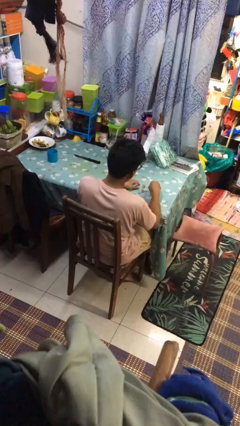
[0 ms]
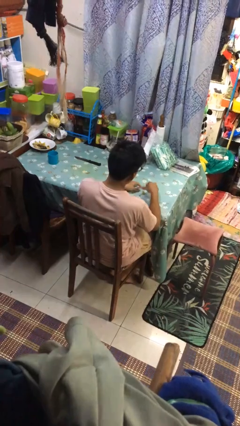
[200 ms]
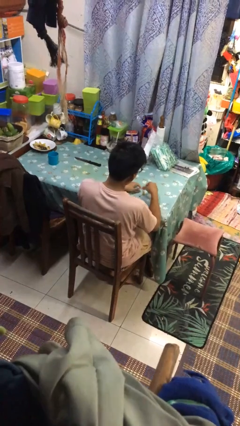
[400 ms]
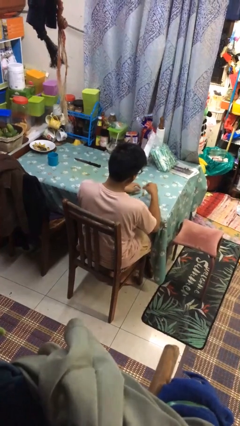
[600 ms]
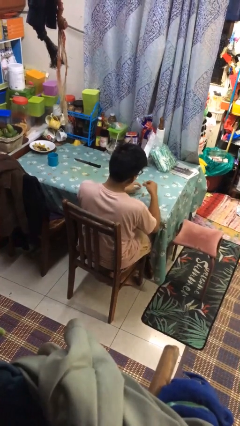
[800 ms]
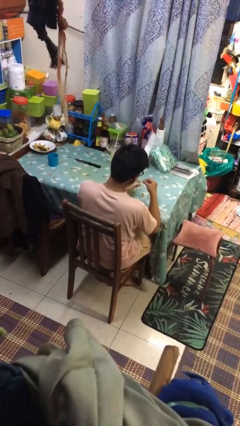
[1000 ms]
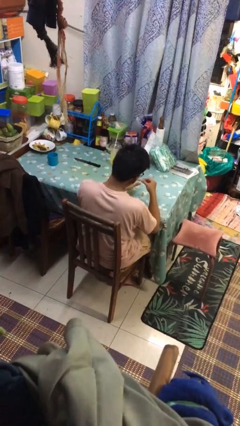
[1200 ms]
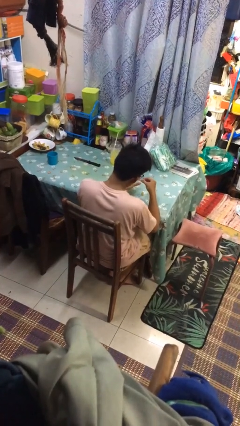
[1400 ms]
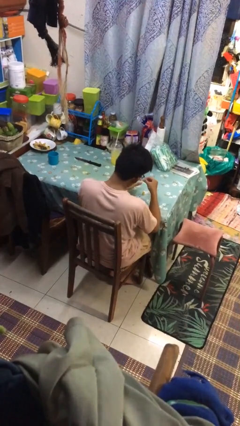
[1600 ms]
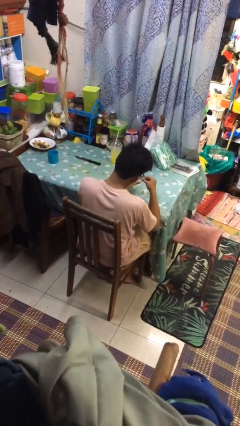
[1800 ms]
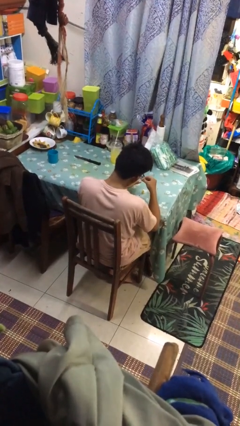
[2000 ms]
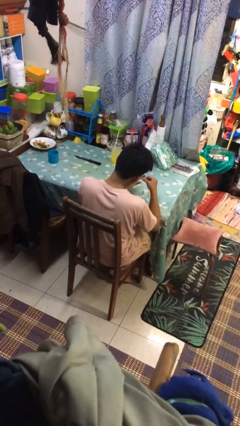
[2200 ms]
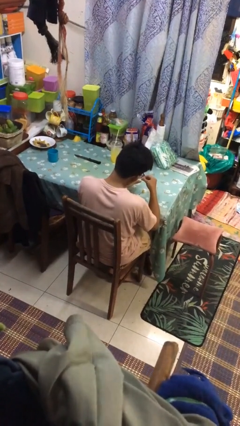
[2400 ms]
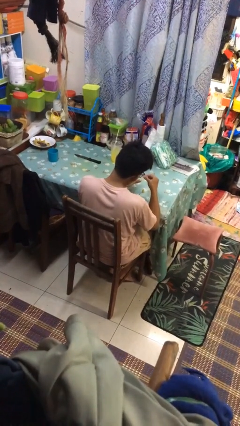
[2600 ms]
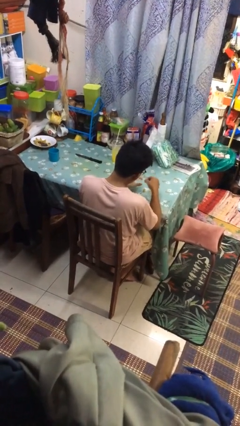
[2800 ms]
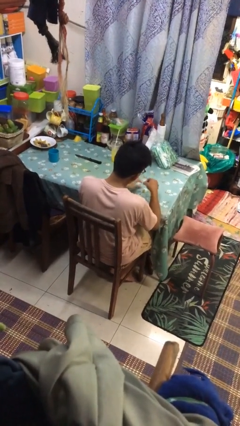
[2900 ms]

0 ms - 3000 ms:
person paints fingernails

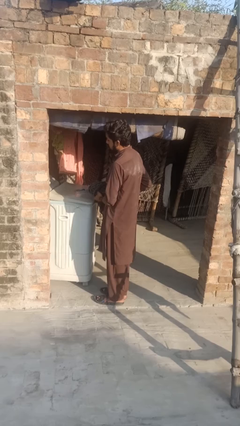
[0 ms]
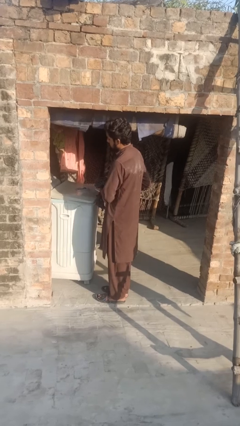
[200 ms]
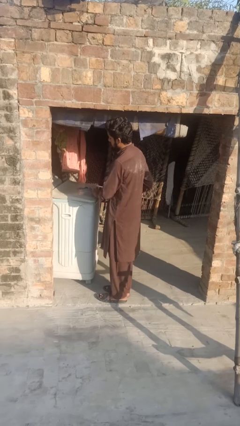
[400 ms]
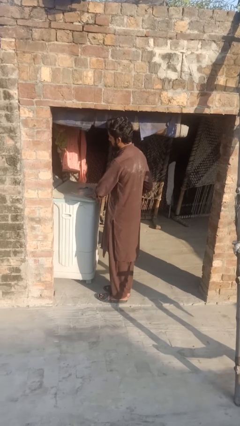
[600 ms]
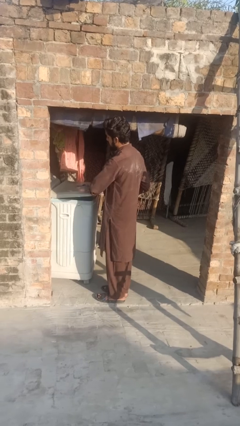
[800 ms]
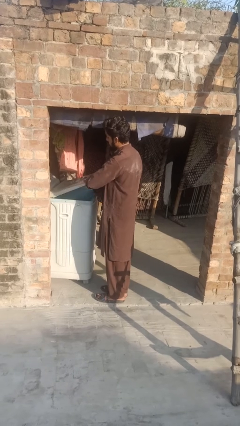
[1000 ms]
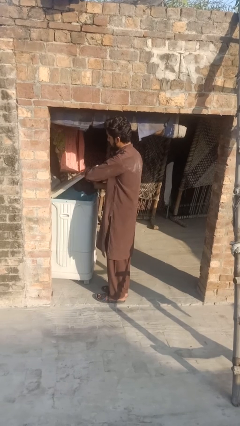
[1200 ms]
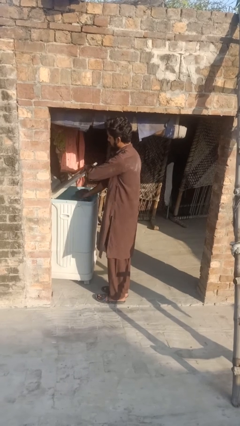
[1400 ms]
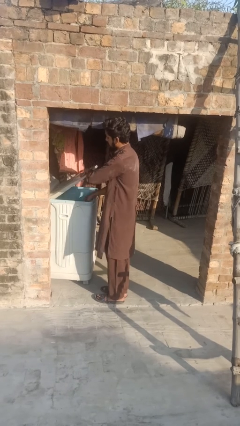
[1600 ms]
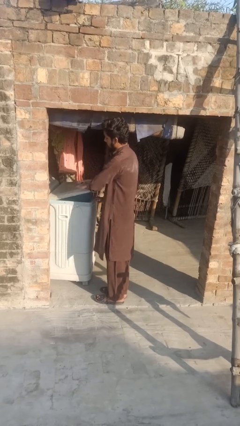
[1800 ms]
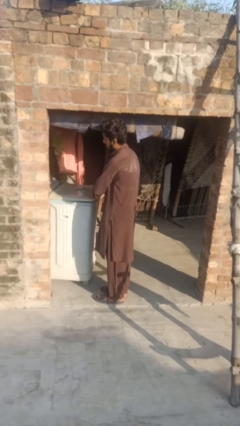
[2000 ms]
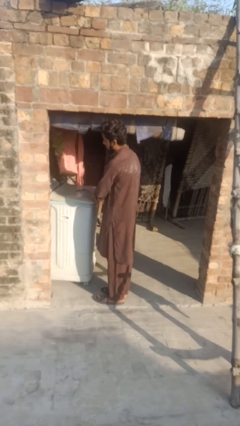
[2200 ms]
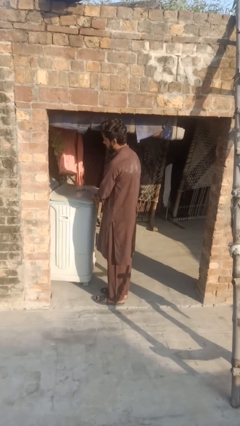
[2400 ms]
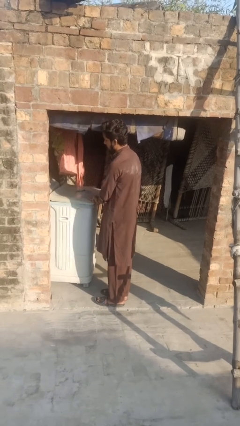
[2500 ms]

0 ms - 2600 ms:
person loads dryer

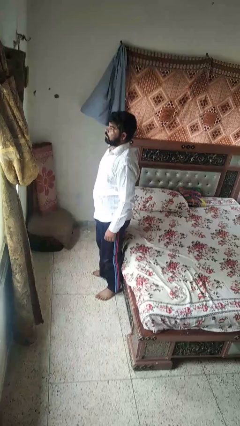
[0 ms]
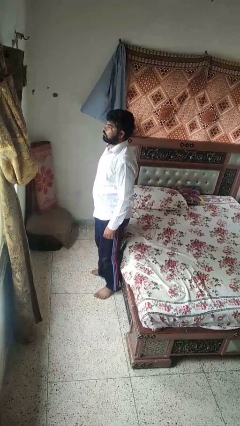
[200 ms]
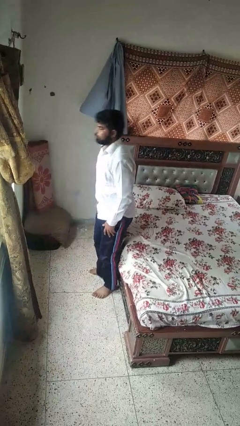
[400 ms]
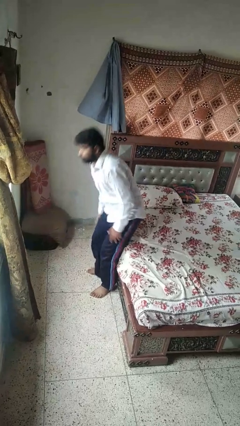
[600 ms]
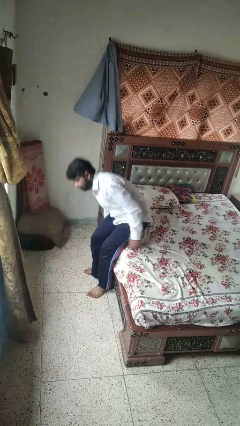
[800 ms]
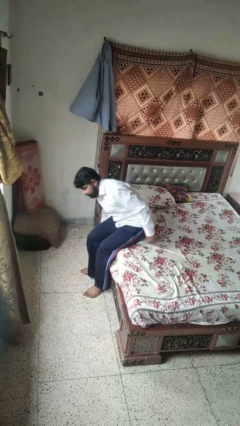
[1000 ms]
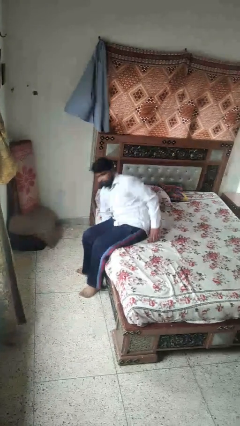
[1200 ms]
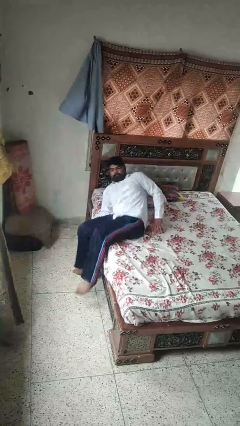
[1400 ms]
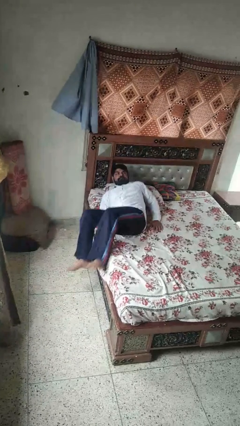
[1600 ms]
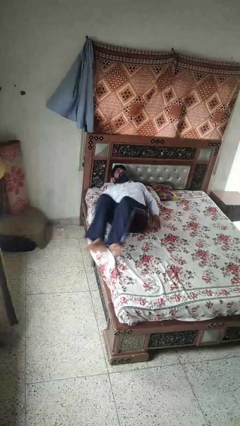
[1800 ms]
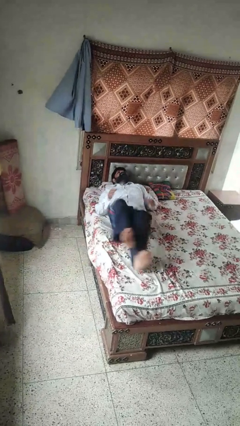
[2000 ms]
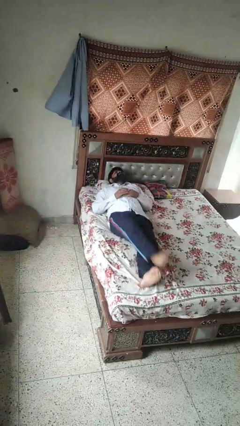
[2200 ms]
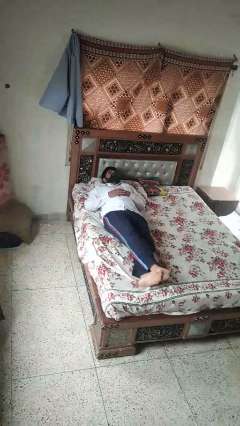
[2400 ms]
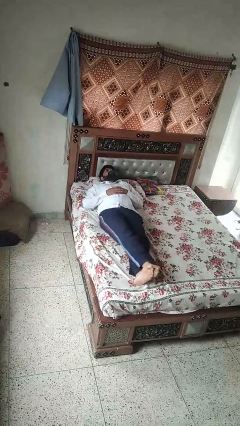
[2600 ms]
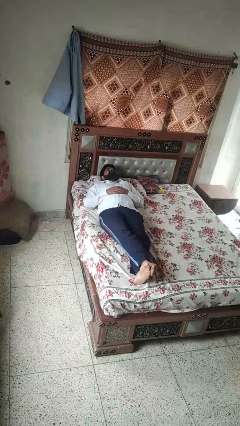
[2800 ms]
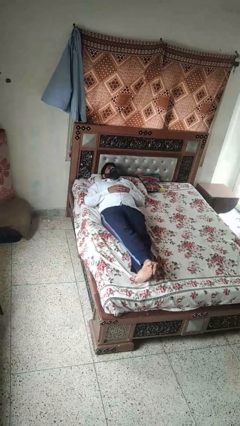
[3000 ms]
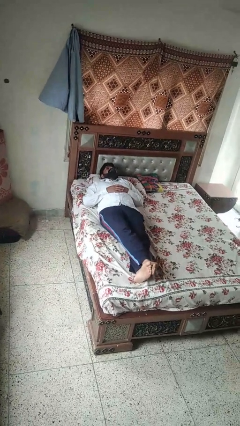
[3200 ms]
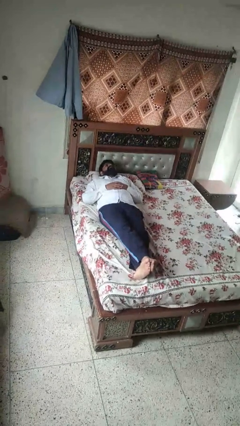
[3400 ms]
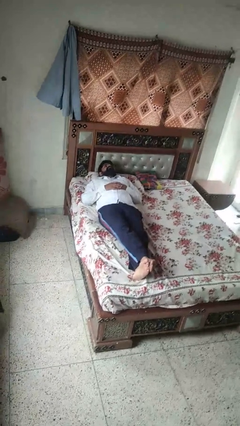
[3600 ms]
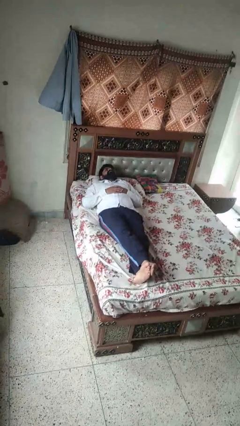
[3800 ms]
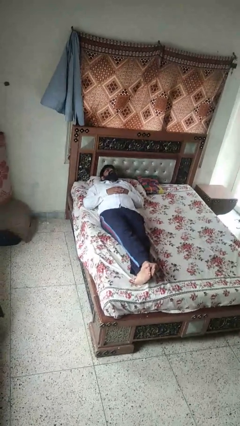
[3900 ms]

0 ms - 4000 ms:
person lies down on bed

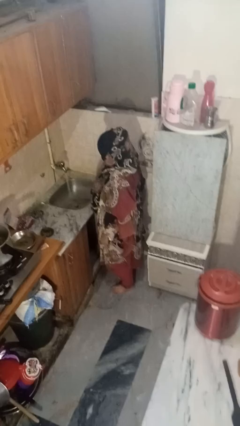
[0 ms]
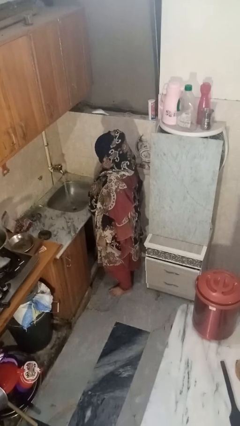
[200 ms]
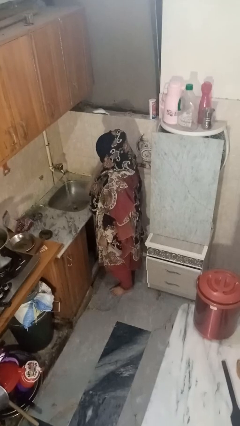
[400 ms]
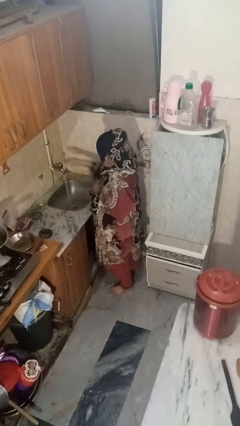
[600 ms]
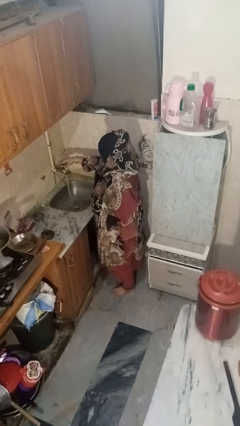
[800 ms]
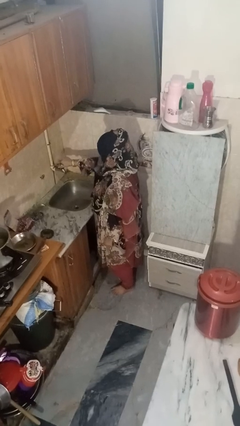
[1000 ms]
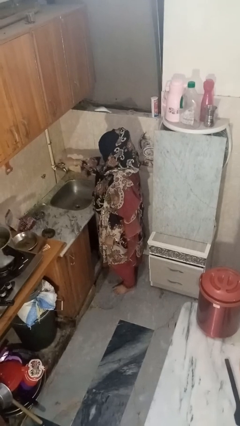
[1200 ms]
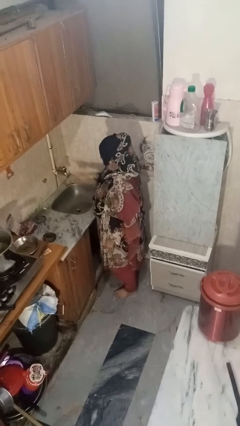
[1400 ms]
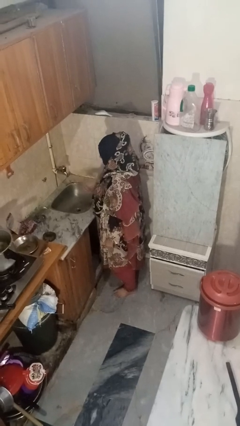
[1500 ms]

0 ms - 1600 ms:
person turns off faucet

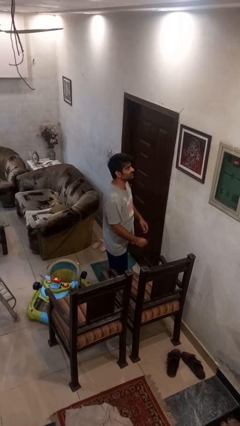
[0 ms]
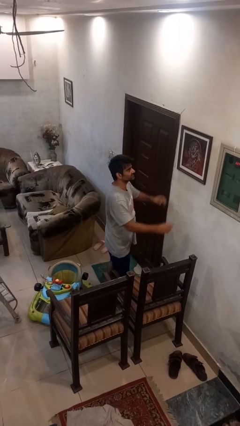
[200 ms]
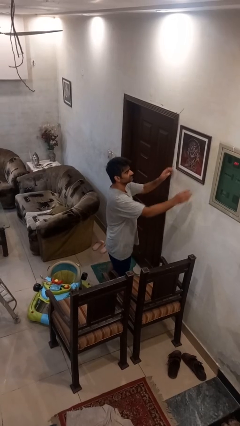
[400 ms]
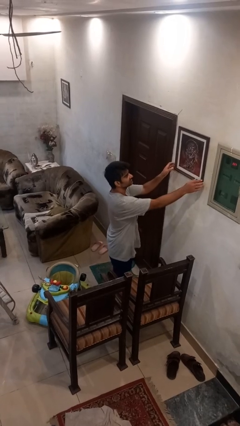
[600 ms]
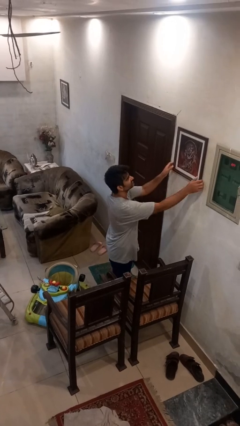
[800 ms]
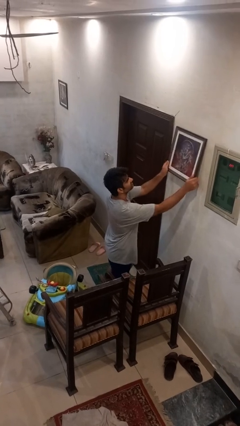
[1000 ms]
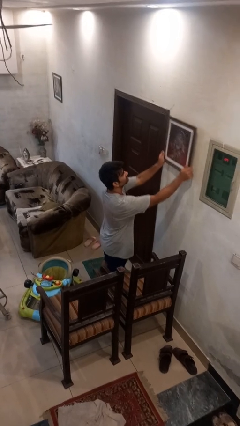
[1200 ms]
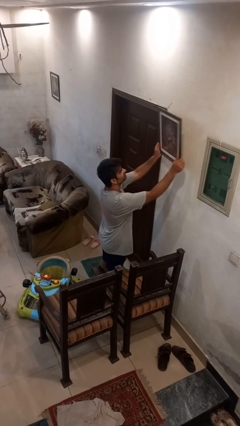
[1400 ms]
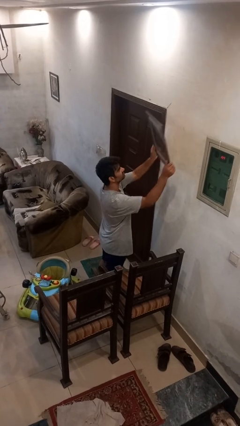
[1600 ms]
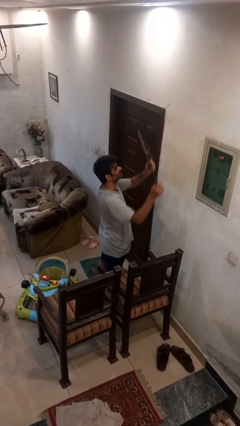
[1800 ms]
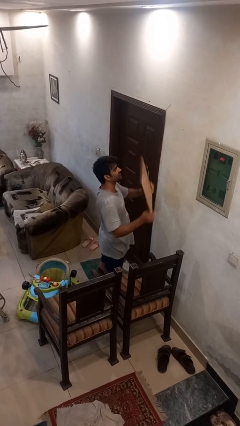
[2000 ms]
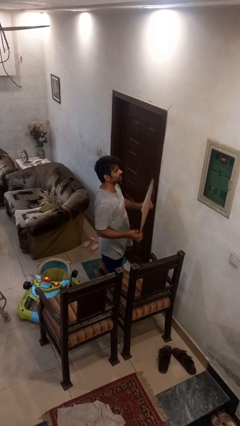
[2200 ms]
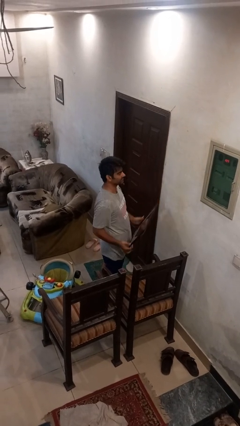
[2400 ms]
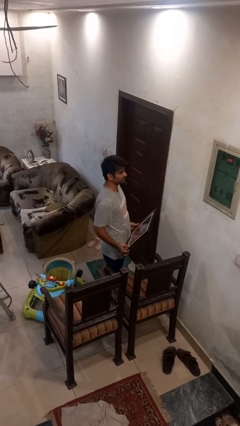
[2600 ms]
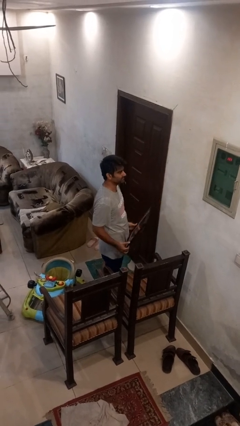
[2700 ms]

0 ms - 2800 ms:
person takes down picture frame

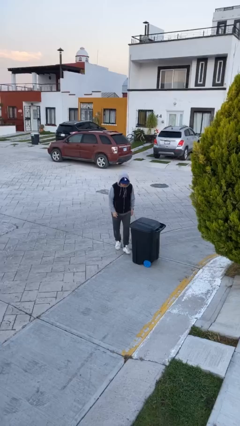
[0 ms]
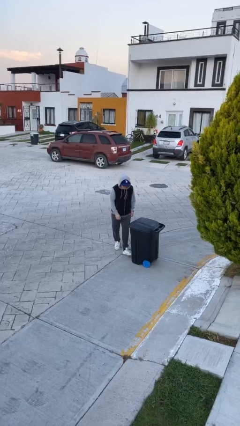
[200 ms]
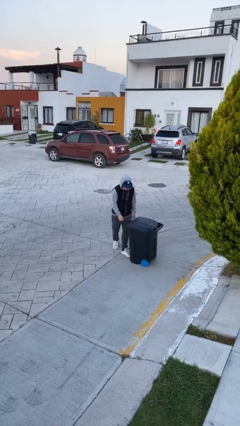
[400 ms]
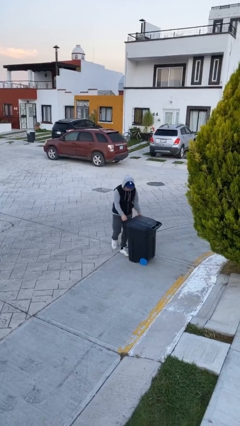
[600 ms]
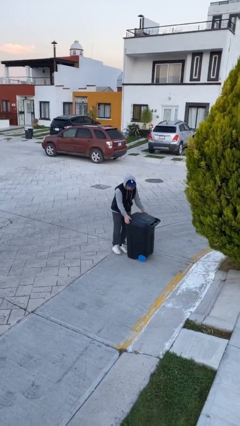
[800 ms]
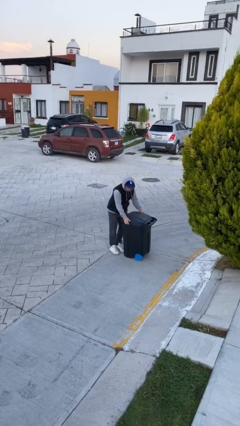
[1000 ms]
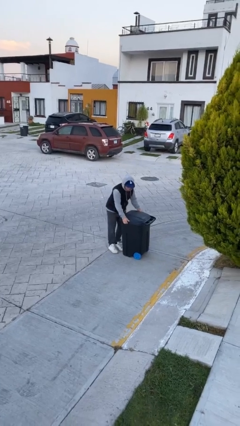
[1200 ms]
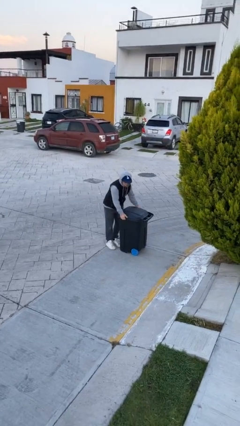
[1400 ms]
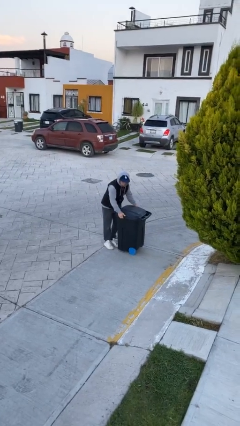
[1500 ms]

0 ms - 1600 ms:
person picks up object from floor

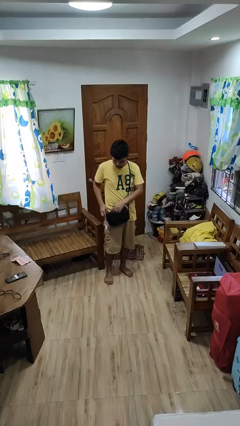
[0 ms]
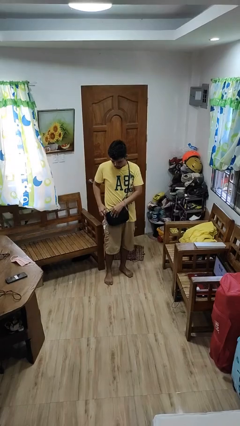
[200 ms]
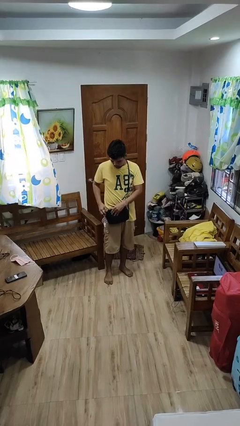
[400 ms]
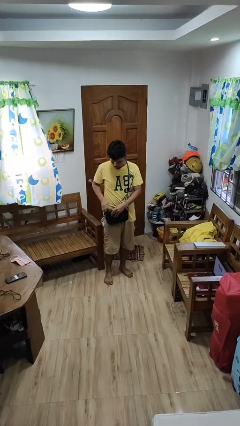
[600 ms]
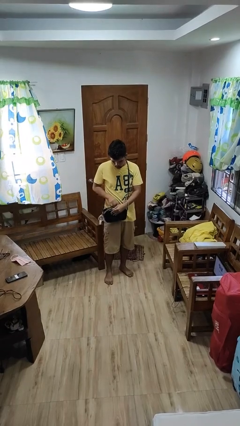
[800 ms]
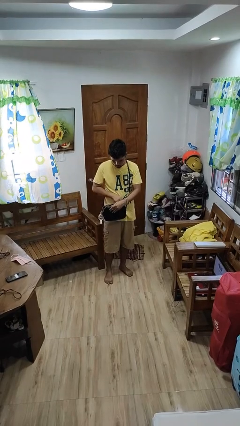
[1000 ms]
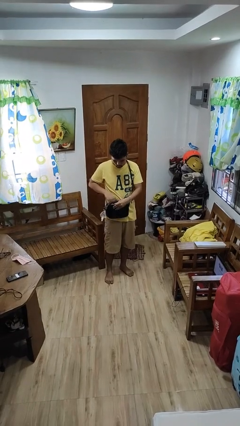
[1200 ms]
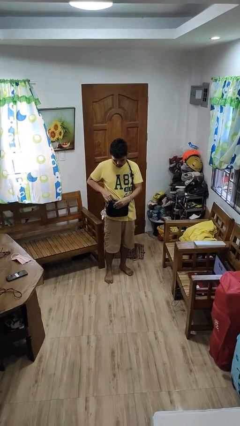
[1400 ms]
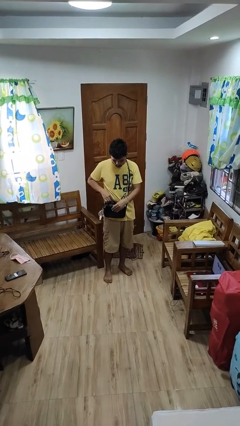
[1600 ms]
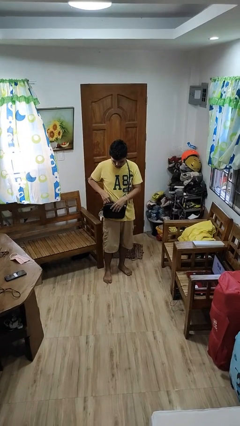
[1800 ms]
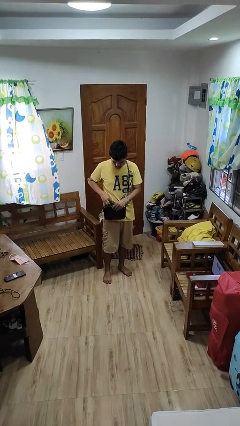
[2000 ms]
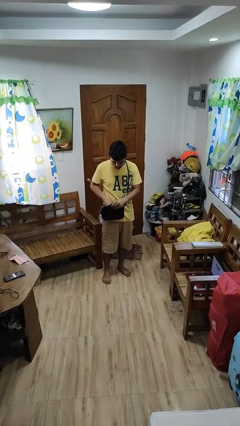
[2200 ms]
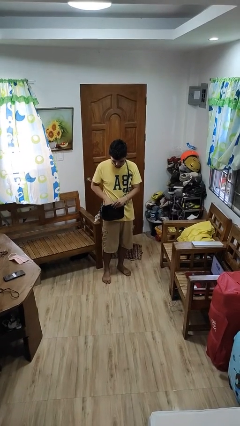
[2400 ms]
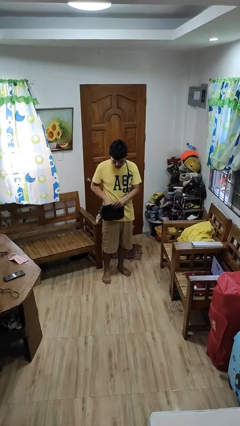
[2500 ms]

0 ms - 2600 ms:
person searches in purse
